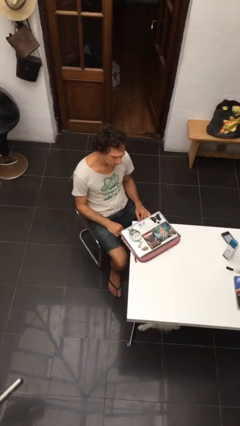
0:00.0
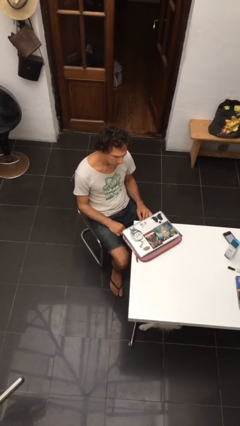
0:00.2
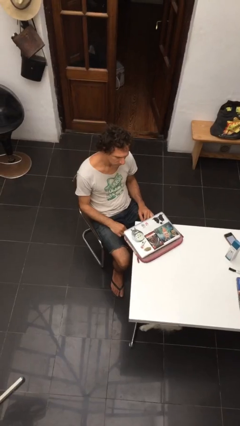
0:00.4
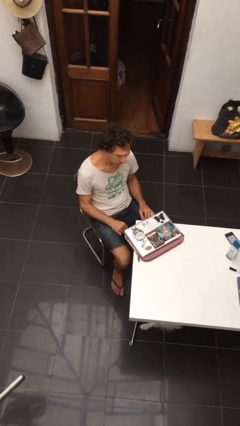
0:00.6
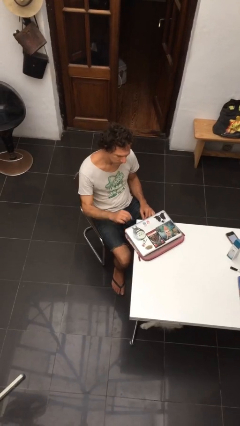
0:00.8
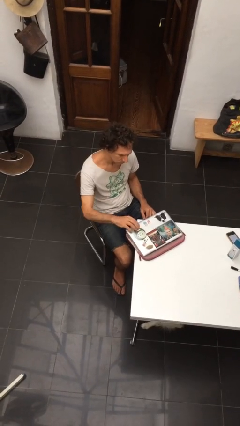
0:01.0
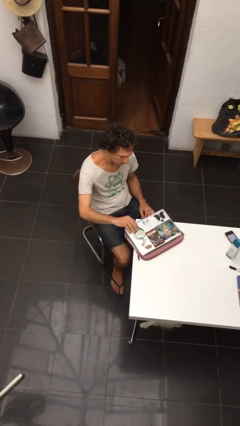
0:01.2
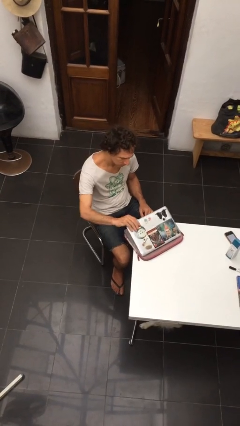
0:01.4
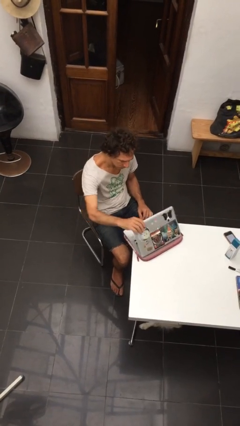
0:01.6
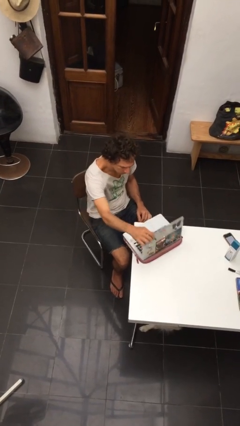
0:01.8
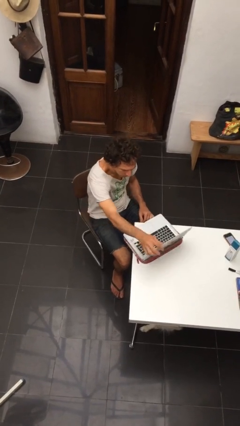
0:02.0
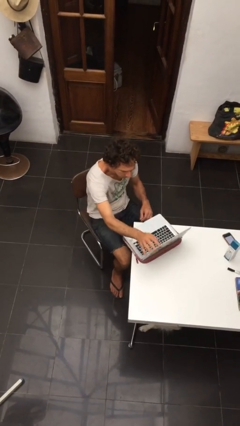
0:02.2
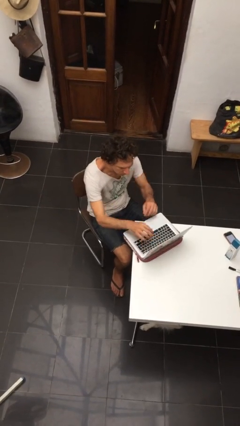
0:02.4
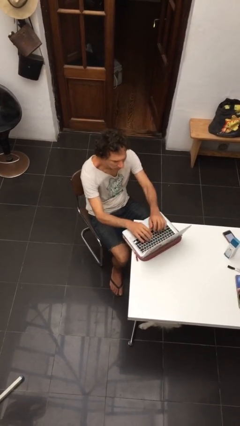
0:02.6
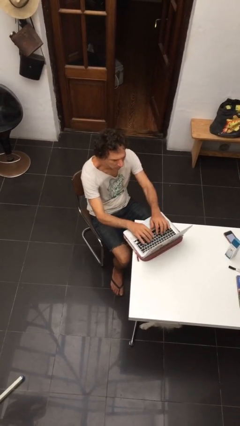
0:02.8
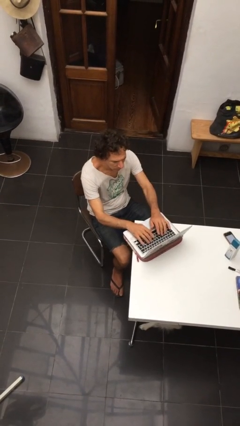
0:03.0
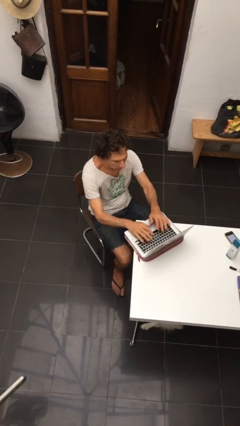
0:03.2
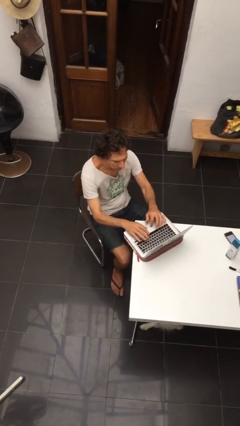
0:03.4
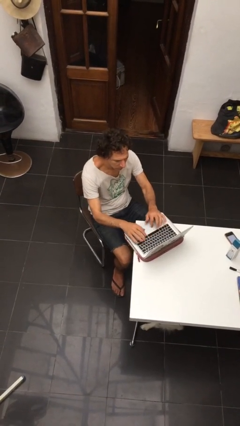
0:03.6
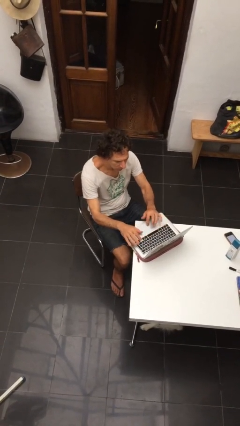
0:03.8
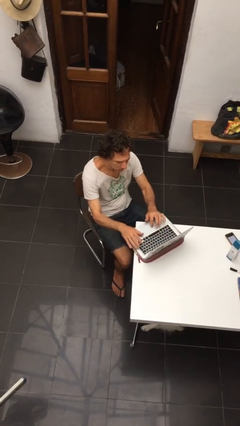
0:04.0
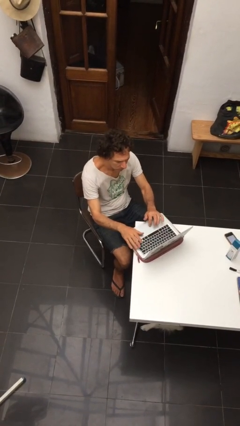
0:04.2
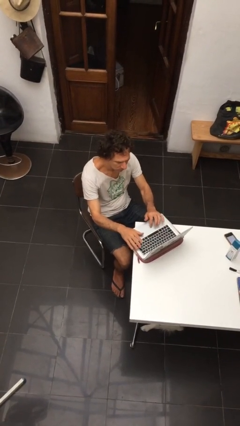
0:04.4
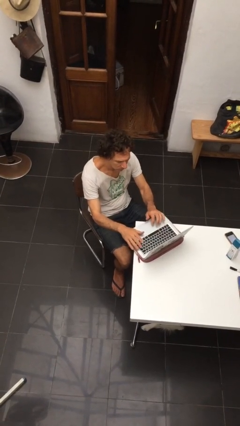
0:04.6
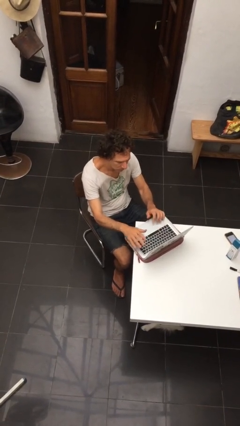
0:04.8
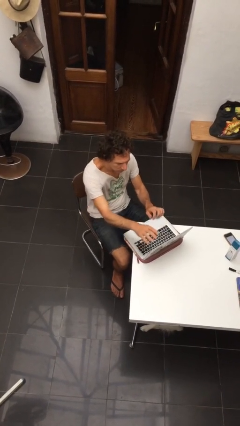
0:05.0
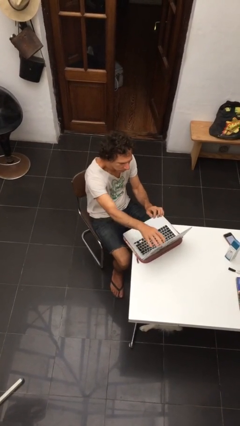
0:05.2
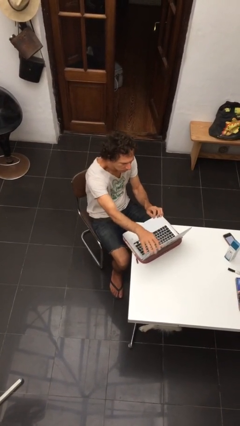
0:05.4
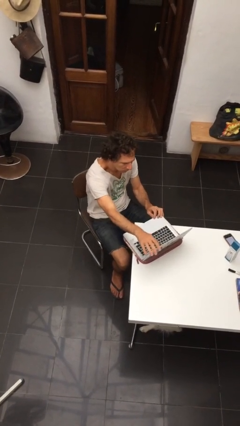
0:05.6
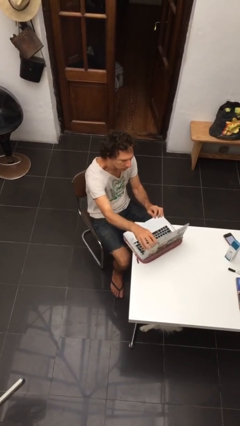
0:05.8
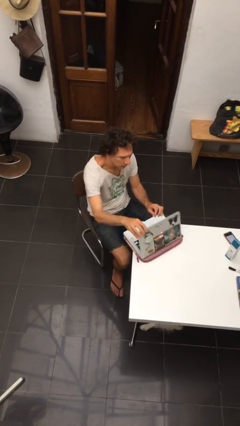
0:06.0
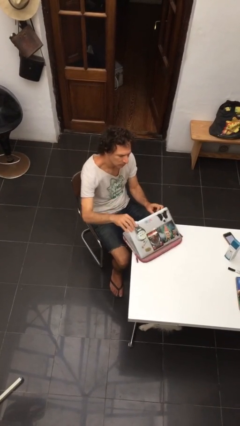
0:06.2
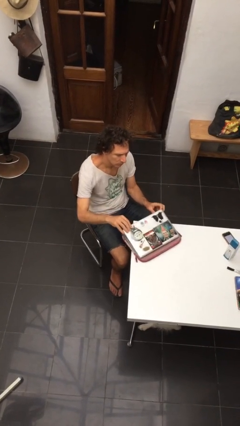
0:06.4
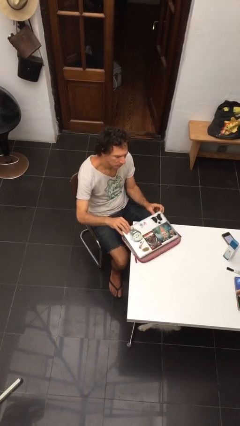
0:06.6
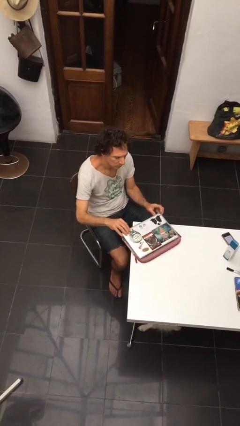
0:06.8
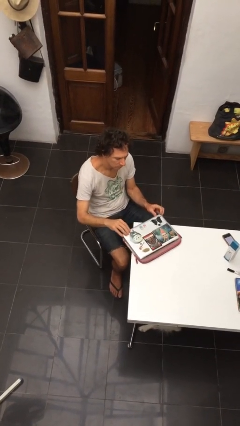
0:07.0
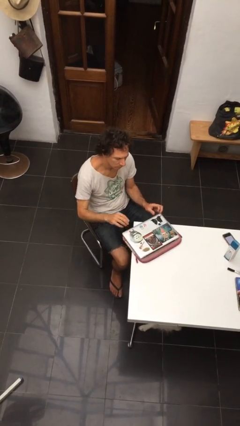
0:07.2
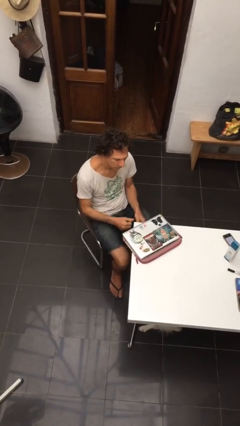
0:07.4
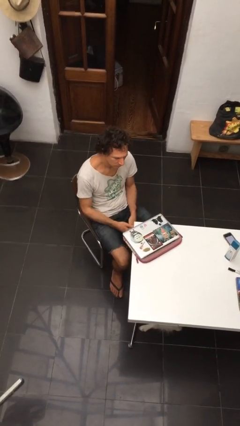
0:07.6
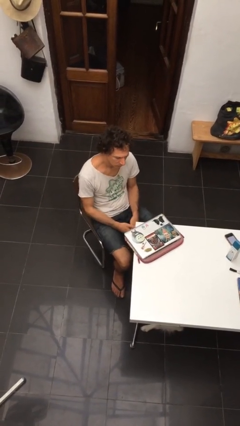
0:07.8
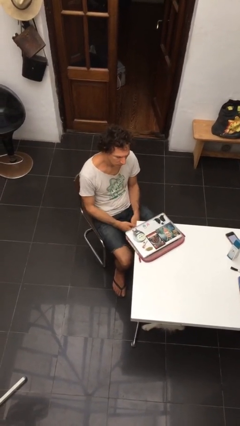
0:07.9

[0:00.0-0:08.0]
person interacts with laptop

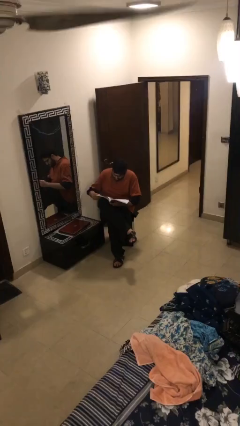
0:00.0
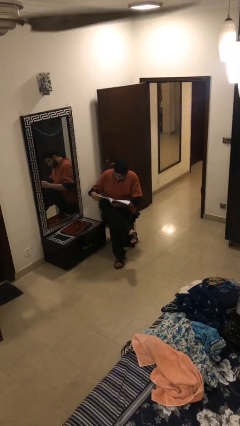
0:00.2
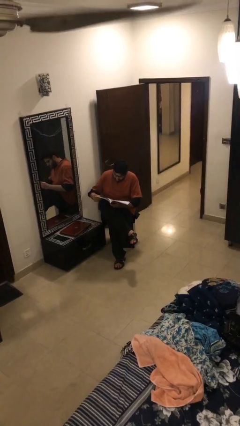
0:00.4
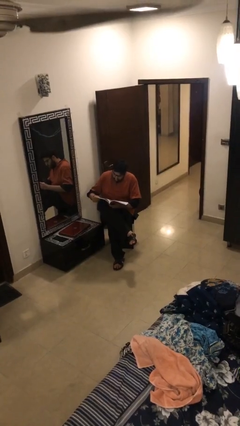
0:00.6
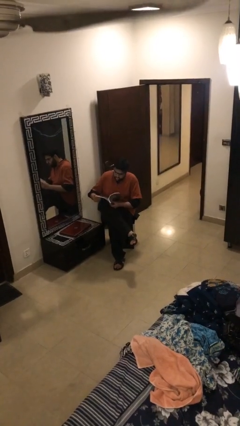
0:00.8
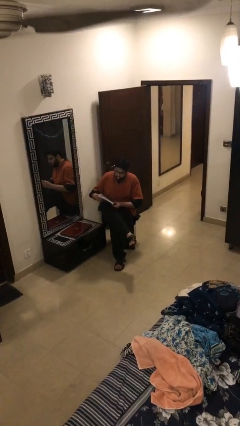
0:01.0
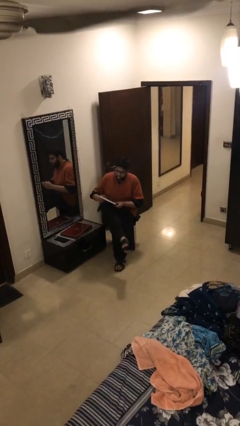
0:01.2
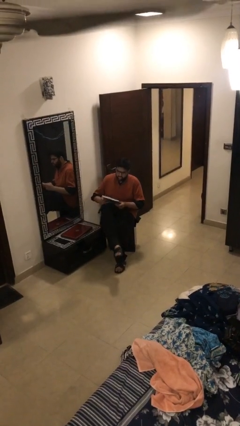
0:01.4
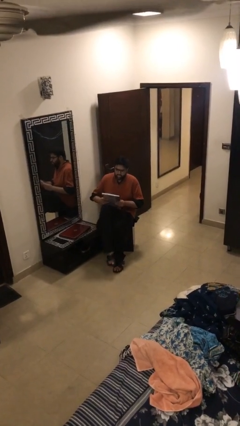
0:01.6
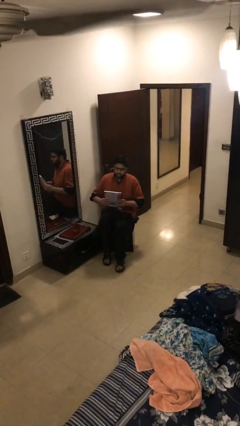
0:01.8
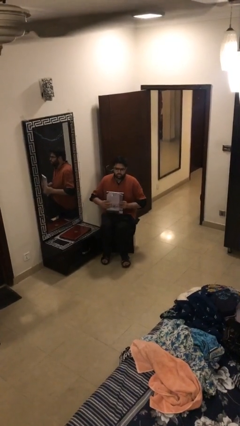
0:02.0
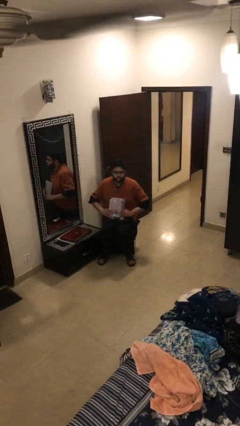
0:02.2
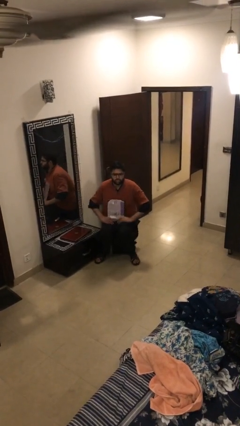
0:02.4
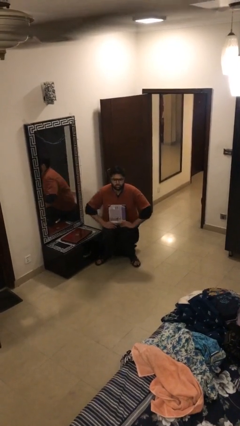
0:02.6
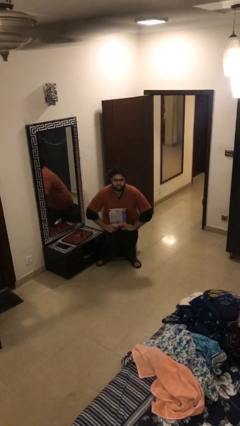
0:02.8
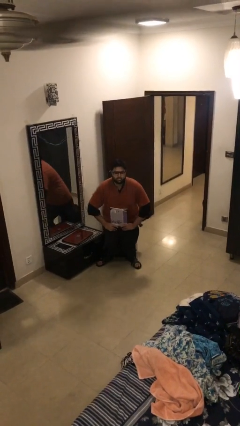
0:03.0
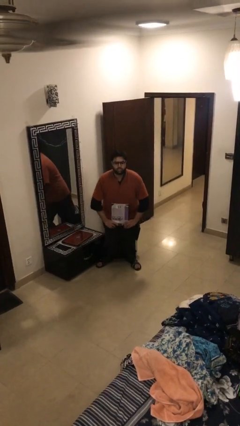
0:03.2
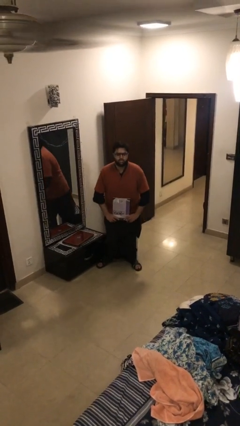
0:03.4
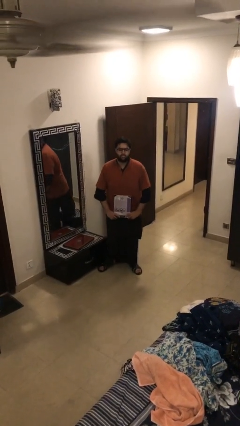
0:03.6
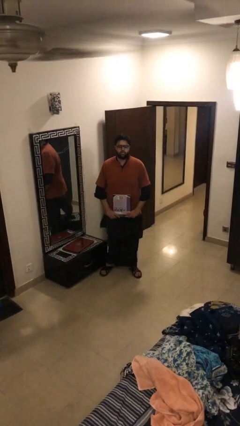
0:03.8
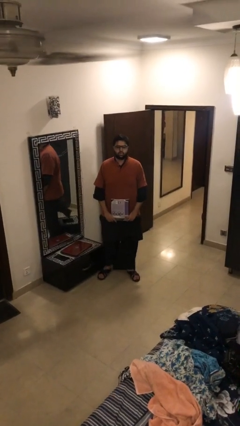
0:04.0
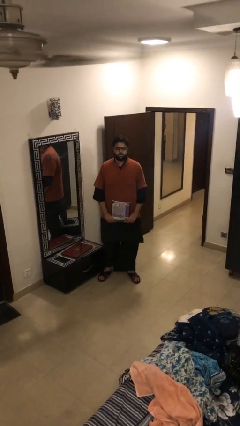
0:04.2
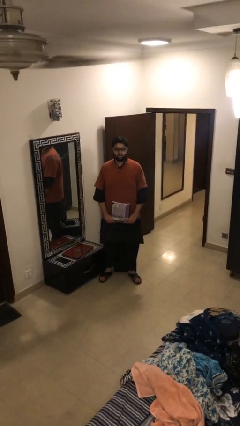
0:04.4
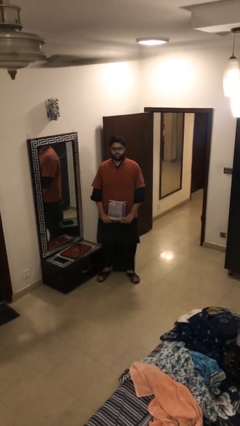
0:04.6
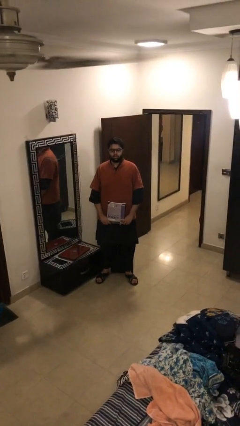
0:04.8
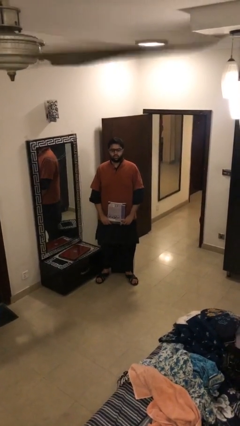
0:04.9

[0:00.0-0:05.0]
person stands up

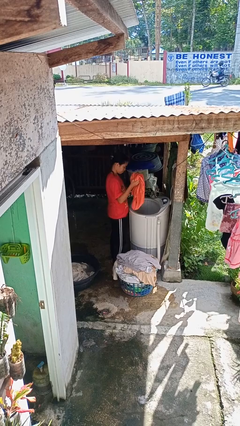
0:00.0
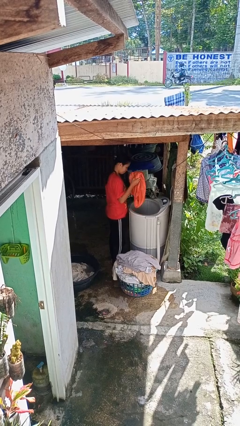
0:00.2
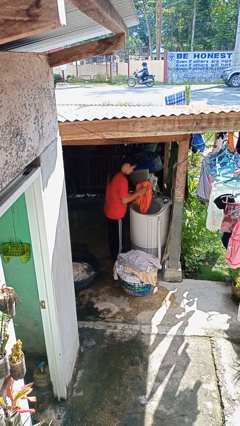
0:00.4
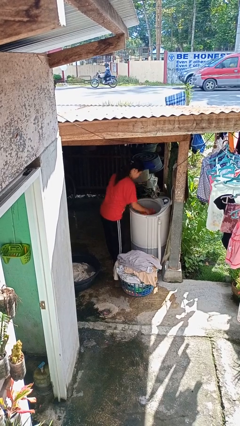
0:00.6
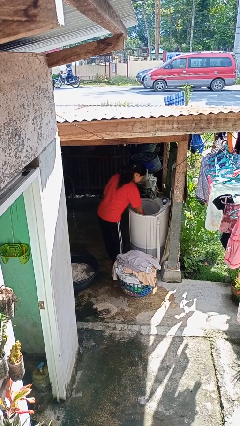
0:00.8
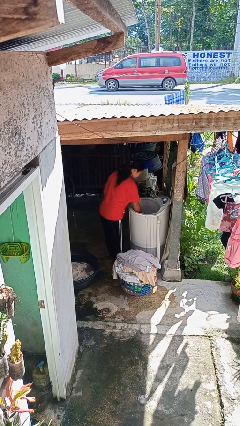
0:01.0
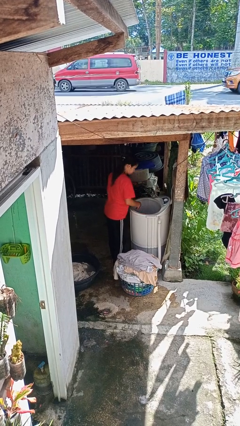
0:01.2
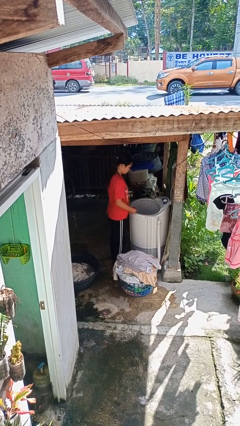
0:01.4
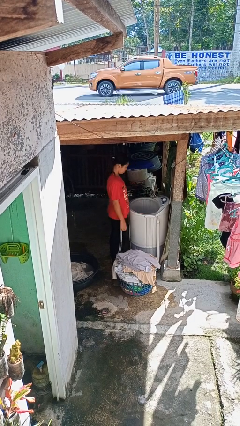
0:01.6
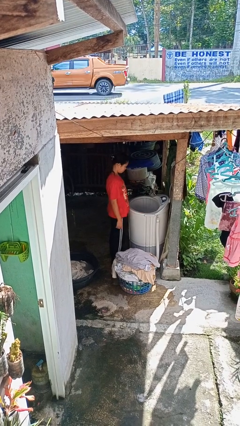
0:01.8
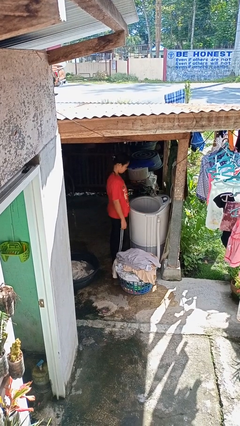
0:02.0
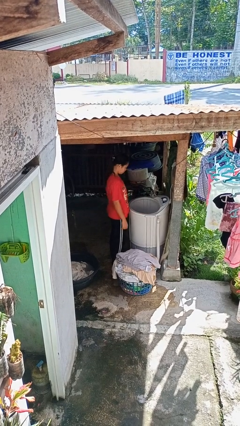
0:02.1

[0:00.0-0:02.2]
person loads clotheswasher

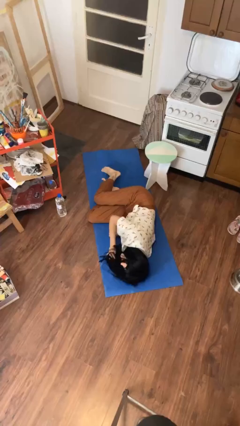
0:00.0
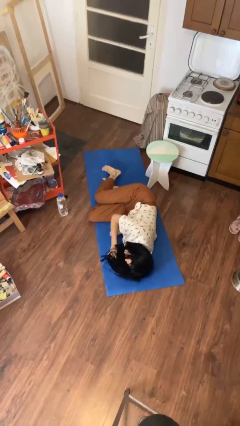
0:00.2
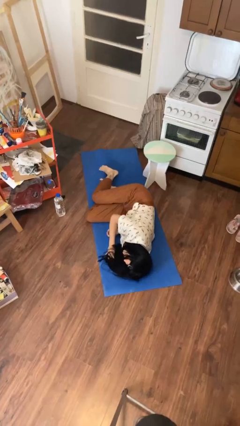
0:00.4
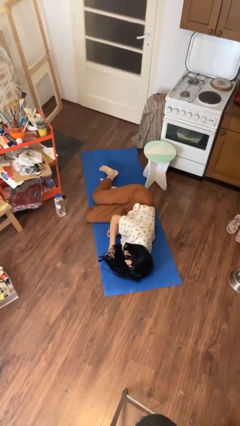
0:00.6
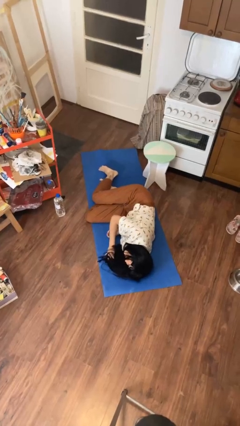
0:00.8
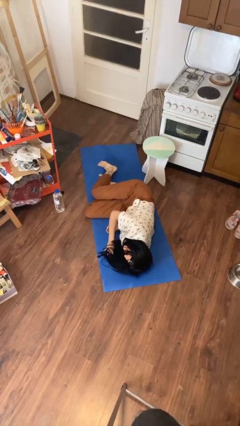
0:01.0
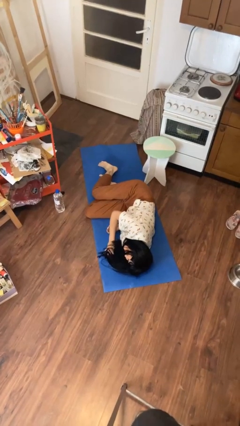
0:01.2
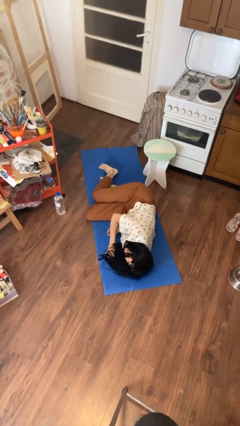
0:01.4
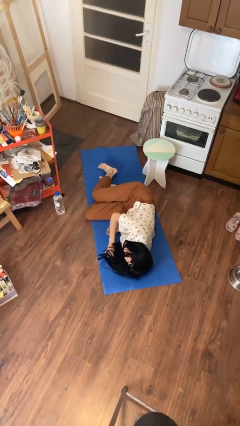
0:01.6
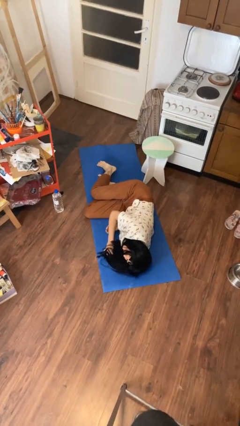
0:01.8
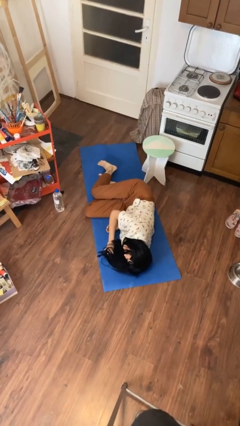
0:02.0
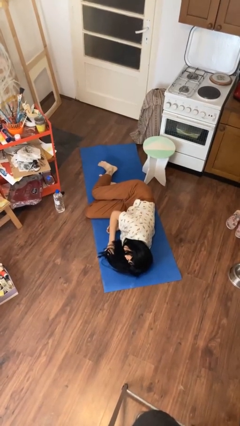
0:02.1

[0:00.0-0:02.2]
person lies down on floor
